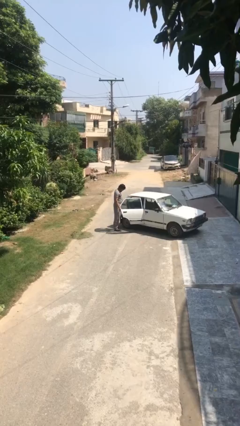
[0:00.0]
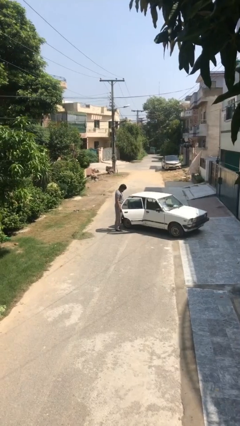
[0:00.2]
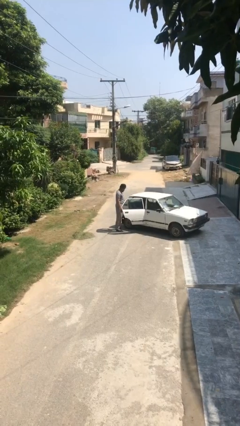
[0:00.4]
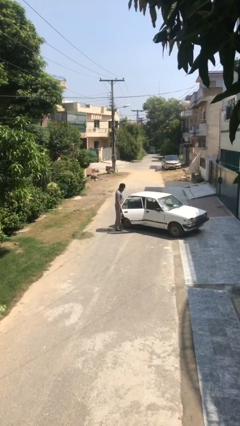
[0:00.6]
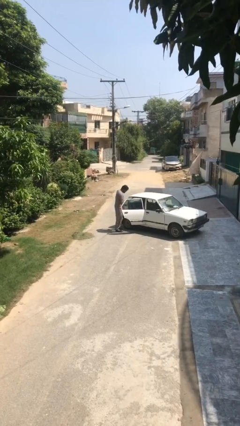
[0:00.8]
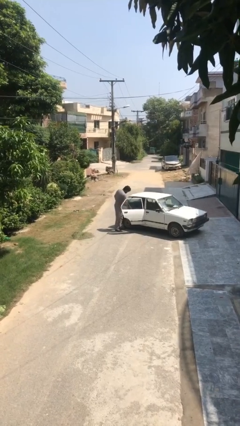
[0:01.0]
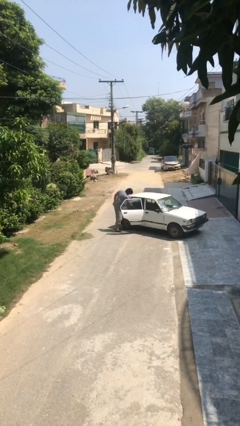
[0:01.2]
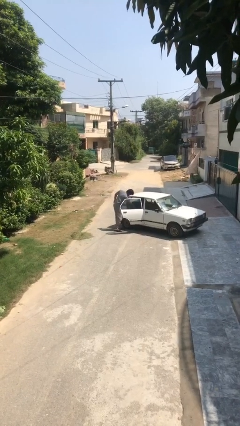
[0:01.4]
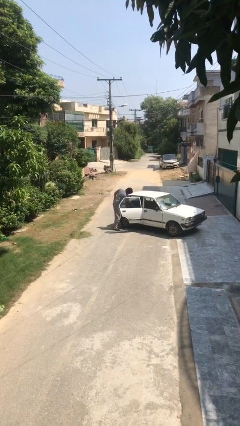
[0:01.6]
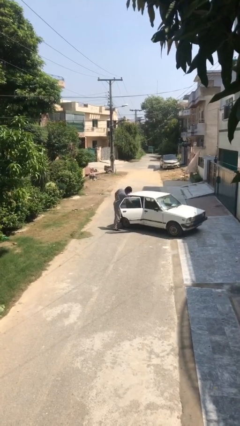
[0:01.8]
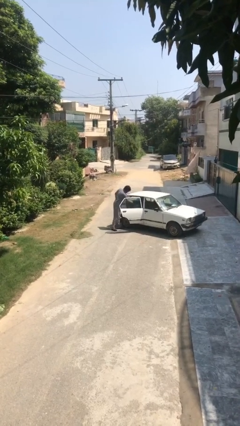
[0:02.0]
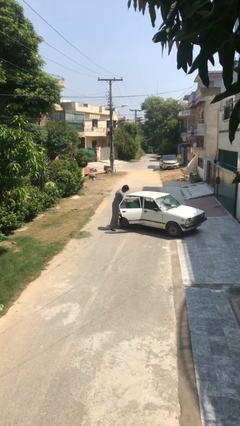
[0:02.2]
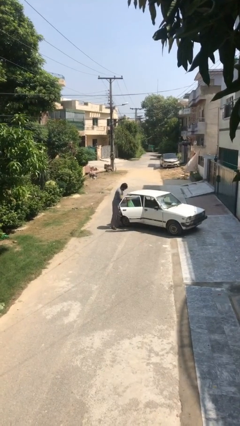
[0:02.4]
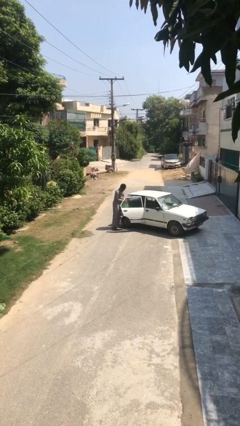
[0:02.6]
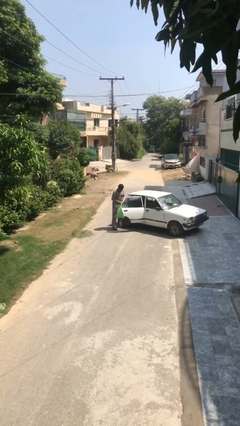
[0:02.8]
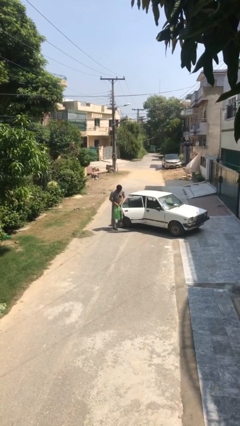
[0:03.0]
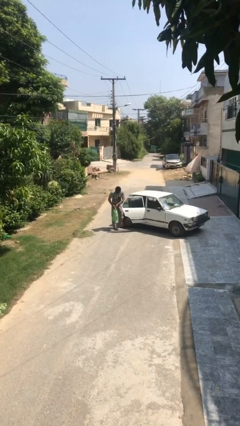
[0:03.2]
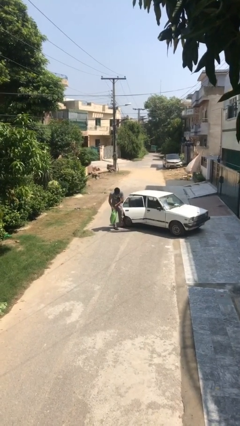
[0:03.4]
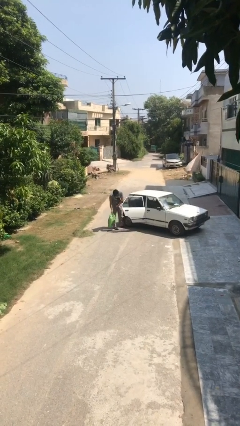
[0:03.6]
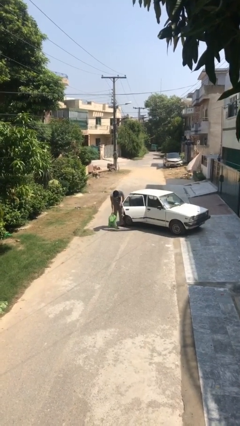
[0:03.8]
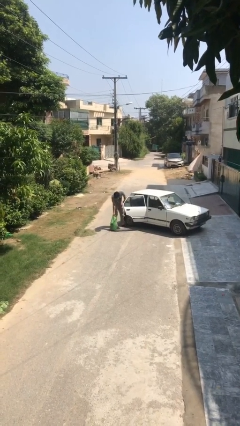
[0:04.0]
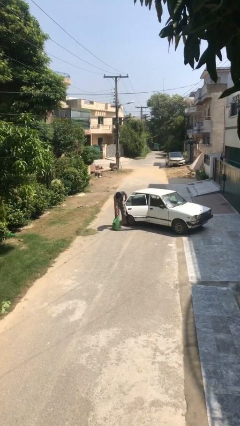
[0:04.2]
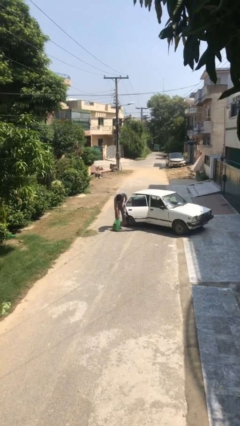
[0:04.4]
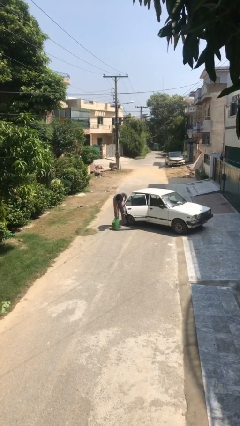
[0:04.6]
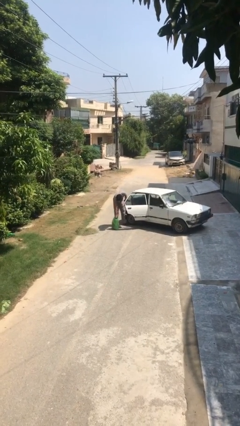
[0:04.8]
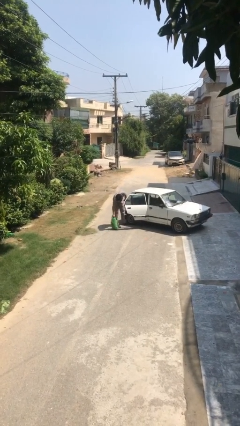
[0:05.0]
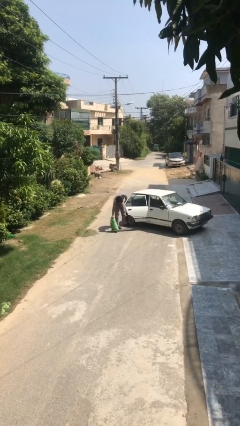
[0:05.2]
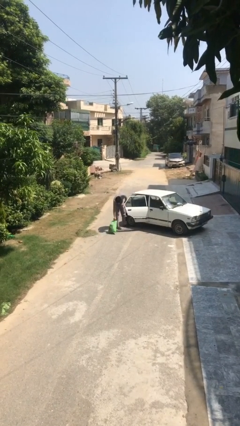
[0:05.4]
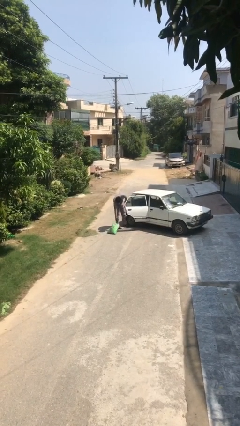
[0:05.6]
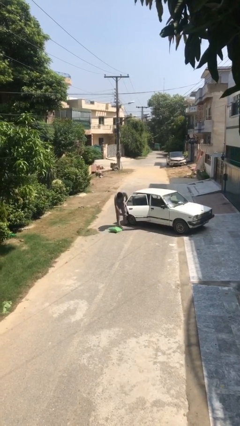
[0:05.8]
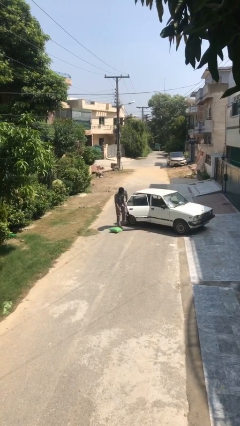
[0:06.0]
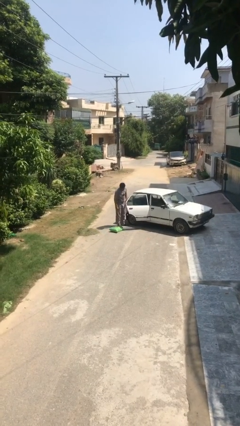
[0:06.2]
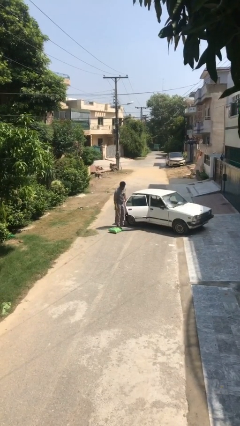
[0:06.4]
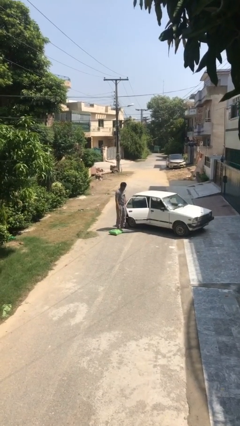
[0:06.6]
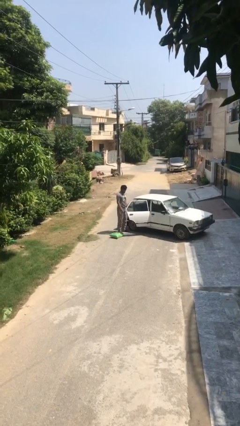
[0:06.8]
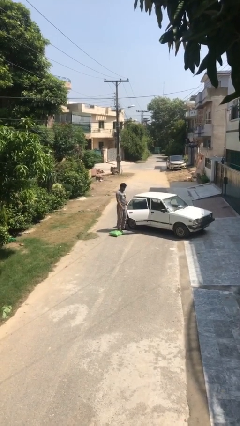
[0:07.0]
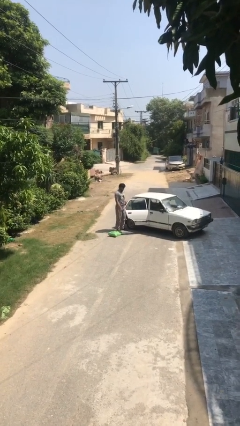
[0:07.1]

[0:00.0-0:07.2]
person unloads car

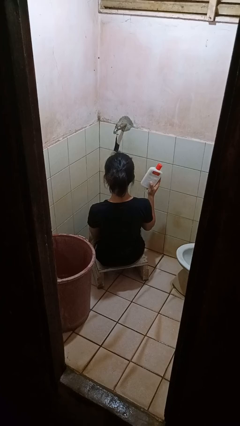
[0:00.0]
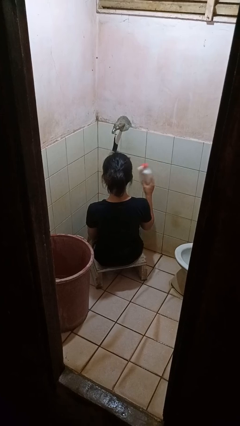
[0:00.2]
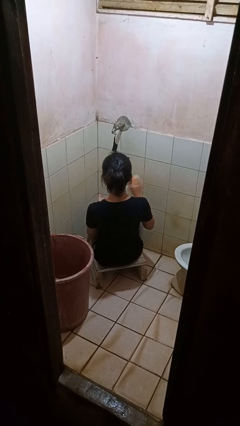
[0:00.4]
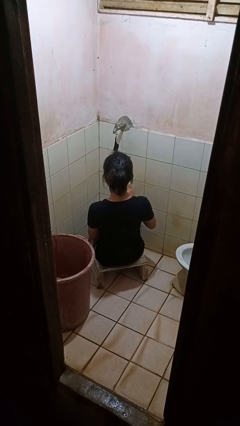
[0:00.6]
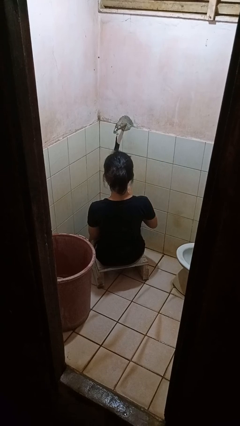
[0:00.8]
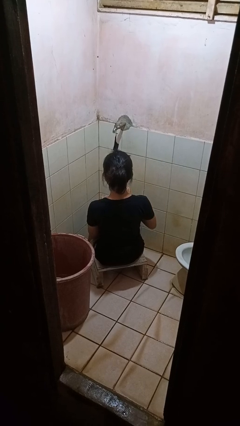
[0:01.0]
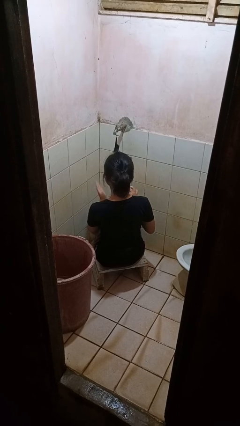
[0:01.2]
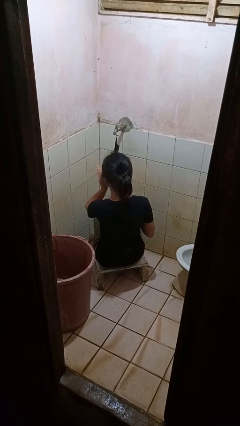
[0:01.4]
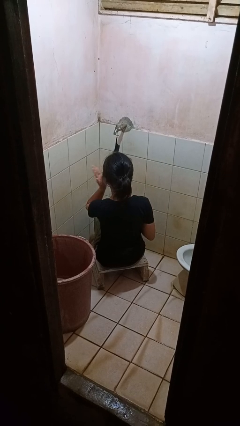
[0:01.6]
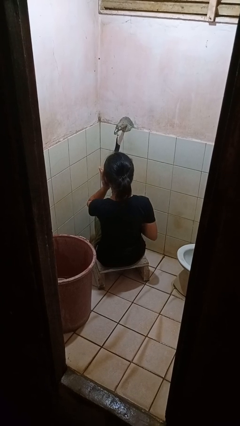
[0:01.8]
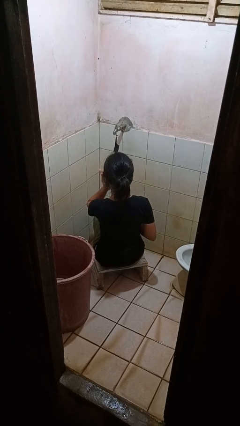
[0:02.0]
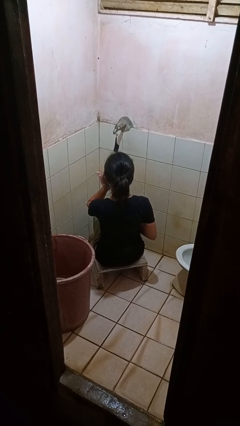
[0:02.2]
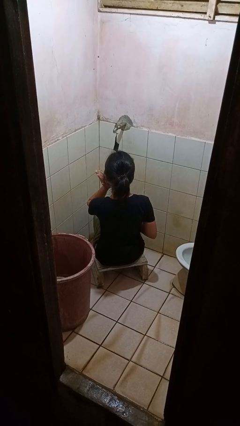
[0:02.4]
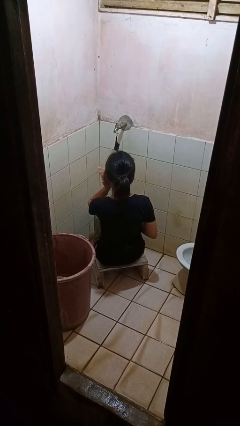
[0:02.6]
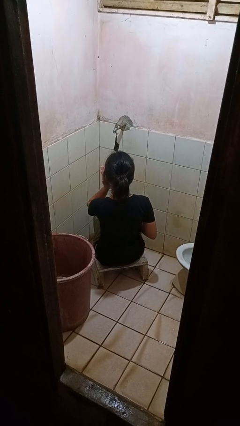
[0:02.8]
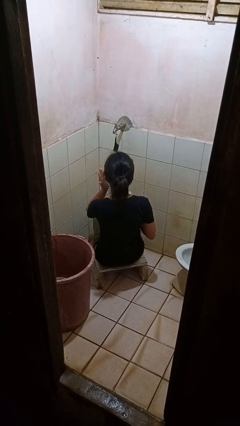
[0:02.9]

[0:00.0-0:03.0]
person applies facial moisturizer

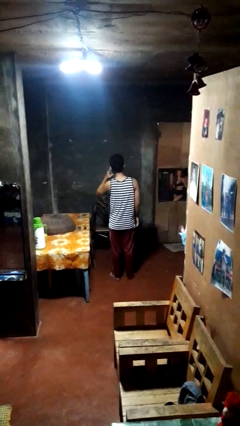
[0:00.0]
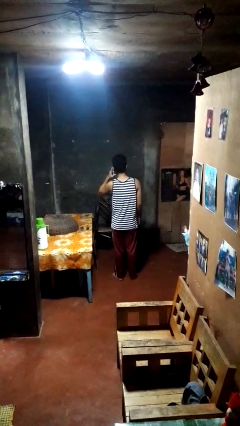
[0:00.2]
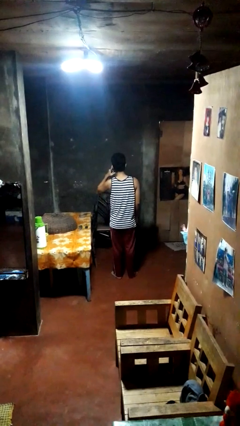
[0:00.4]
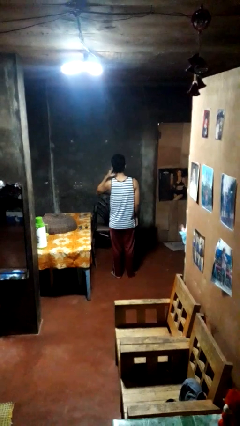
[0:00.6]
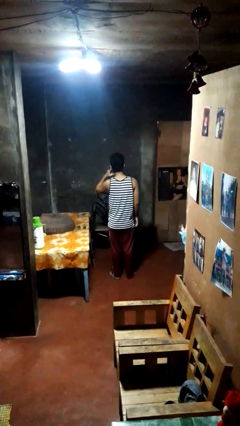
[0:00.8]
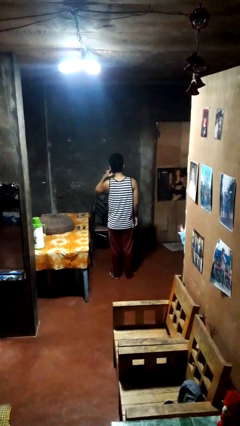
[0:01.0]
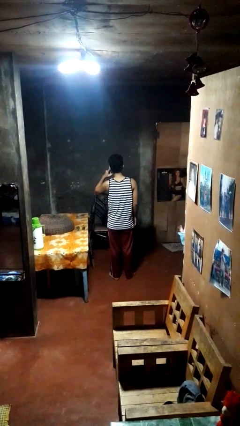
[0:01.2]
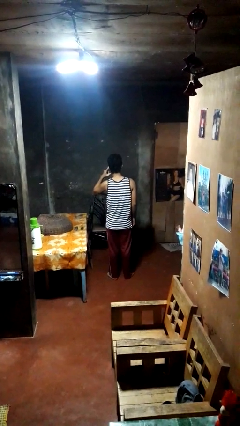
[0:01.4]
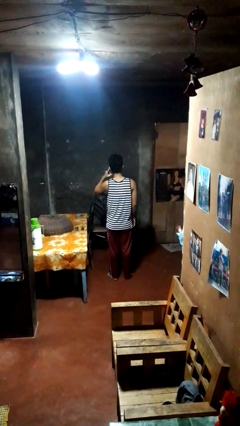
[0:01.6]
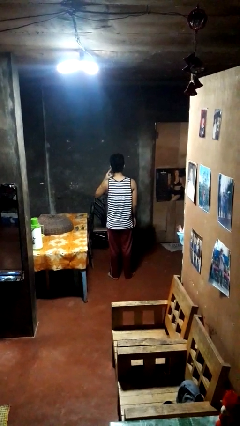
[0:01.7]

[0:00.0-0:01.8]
person gestures listen closely

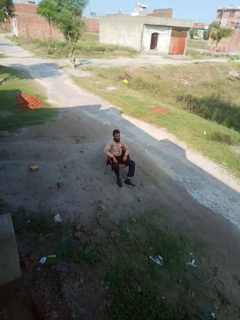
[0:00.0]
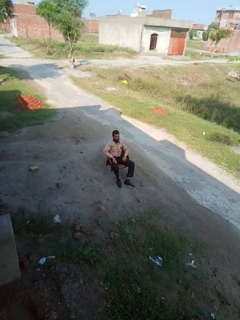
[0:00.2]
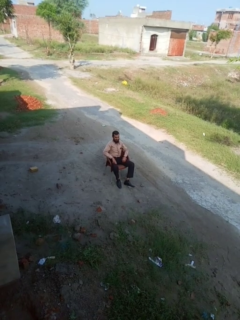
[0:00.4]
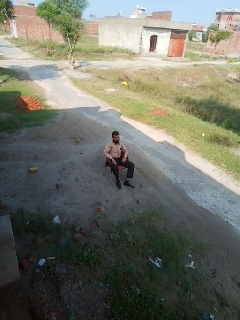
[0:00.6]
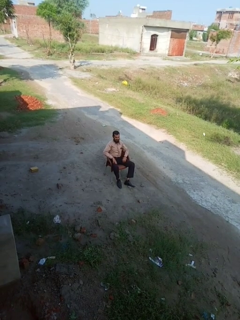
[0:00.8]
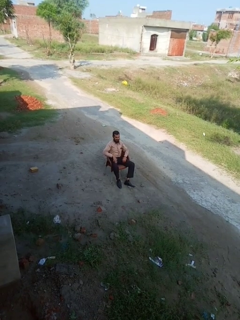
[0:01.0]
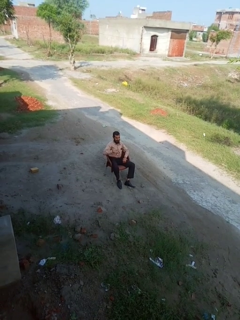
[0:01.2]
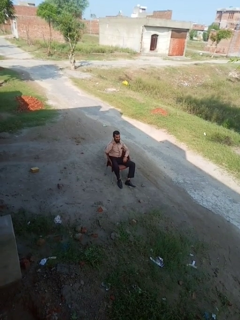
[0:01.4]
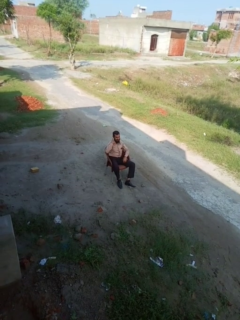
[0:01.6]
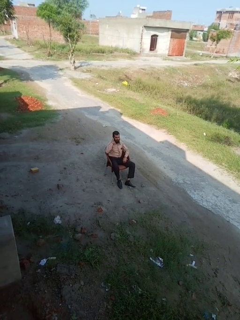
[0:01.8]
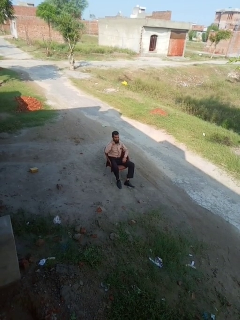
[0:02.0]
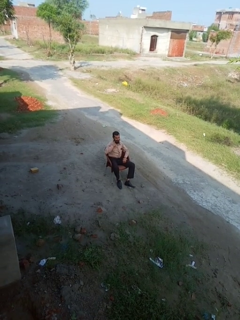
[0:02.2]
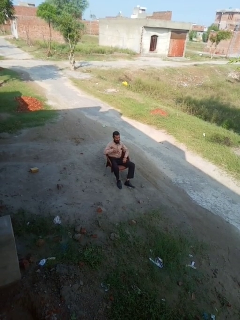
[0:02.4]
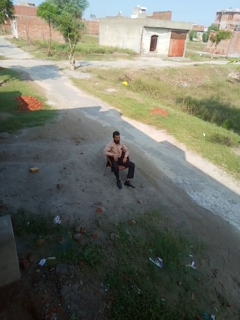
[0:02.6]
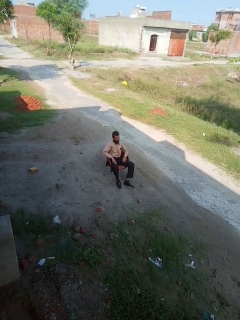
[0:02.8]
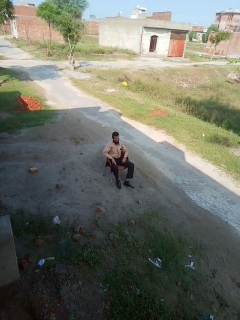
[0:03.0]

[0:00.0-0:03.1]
person gestures call me

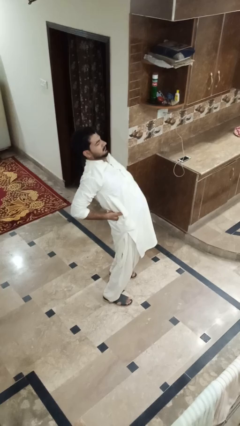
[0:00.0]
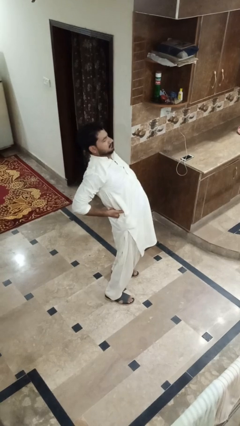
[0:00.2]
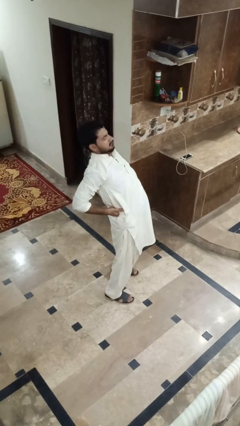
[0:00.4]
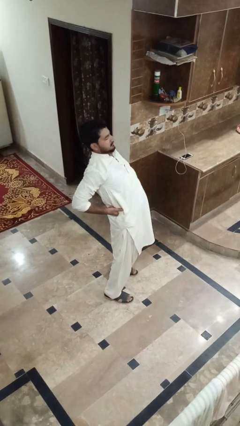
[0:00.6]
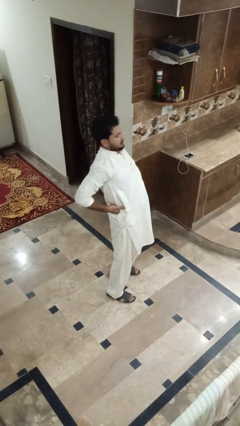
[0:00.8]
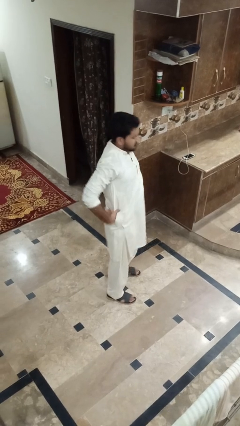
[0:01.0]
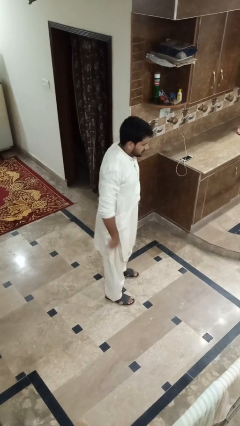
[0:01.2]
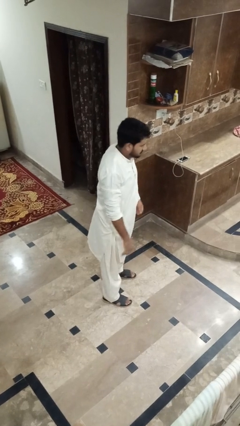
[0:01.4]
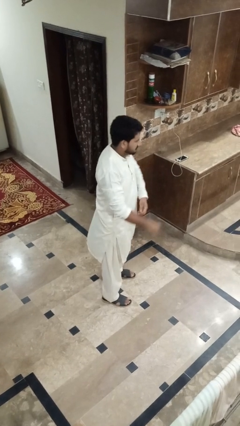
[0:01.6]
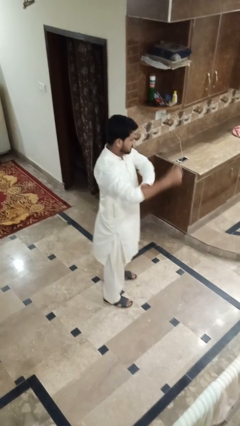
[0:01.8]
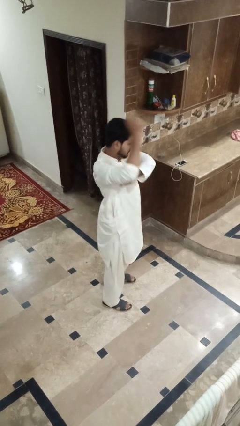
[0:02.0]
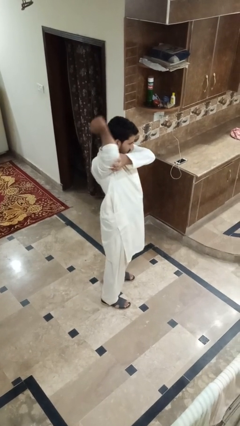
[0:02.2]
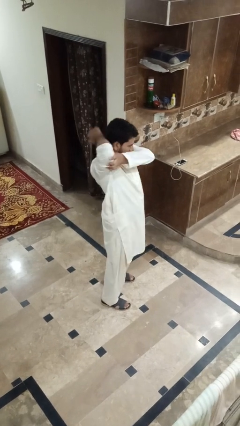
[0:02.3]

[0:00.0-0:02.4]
person stretches back

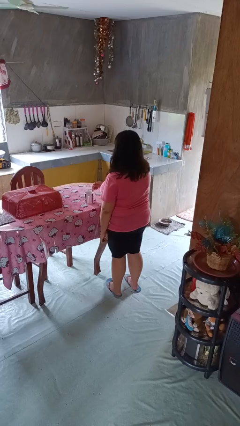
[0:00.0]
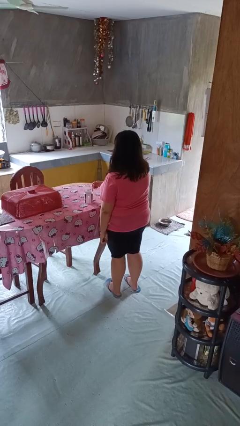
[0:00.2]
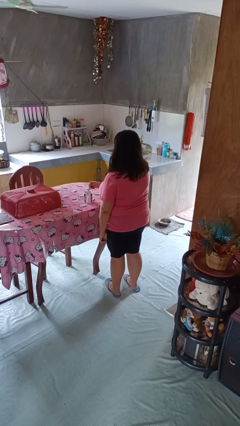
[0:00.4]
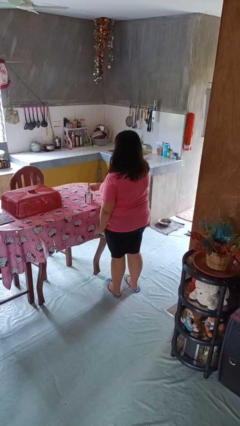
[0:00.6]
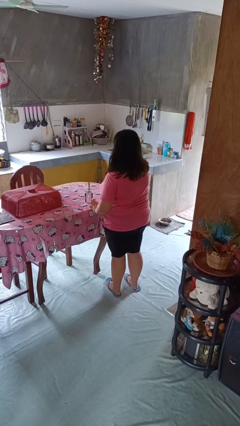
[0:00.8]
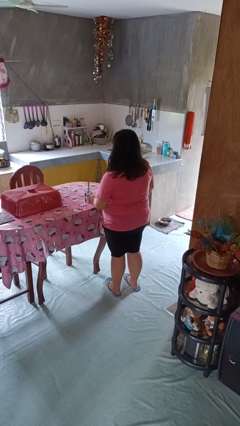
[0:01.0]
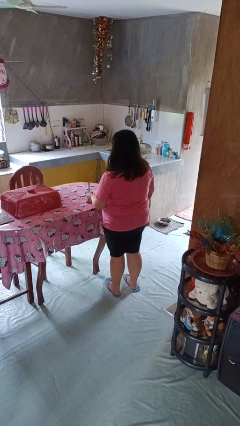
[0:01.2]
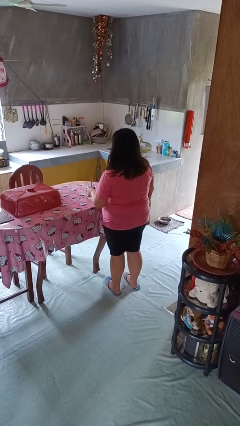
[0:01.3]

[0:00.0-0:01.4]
person stirs mug
